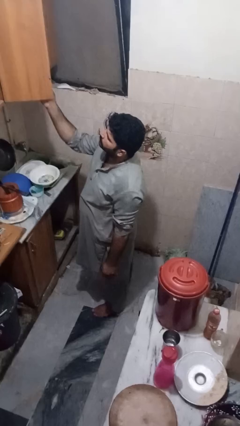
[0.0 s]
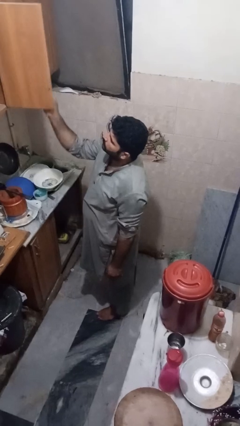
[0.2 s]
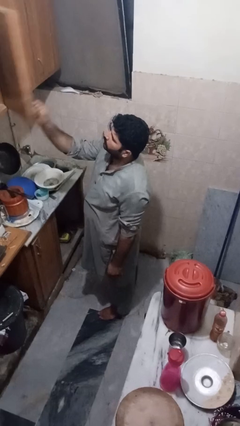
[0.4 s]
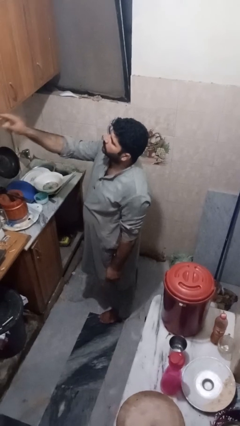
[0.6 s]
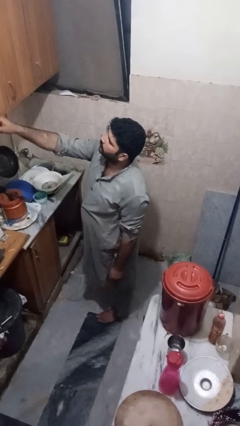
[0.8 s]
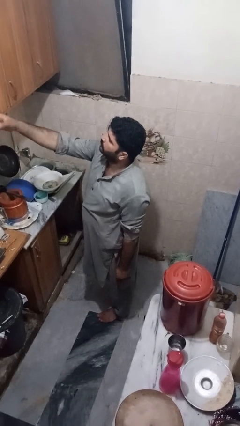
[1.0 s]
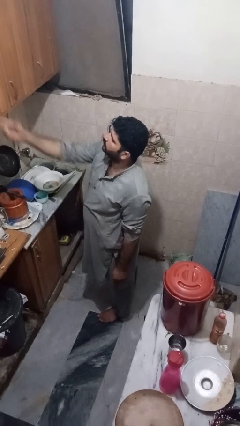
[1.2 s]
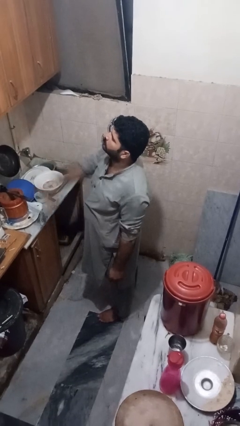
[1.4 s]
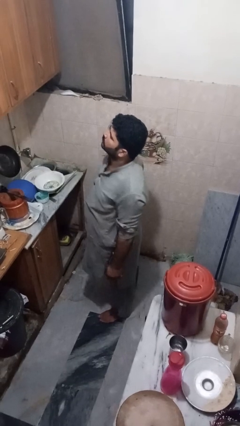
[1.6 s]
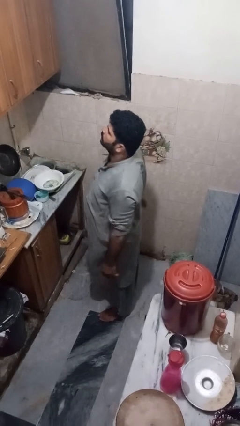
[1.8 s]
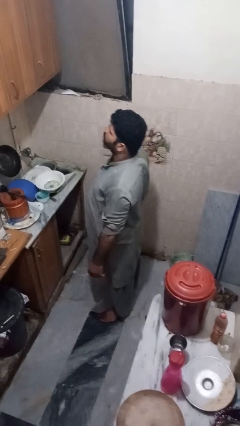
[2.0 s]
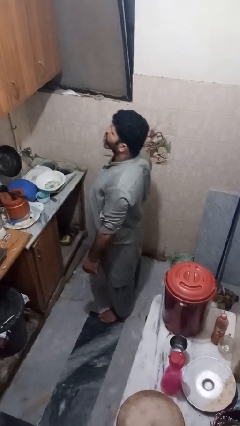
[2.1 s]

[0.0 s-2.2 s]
person closes cabinet

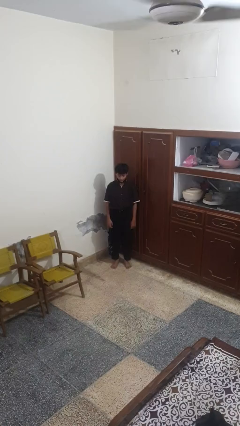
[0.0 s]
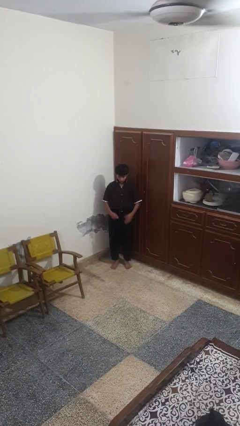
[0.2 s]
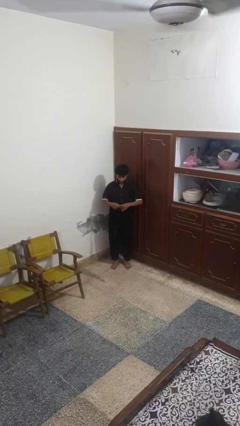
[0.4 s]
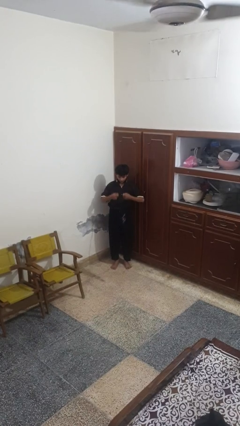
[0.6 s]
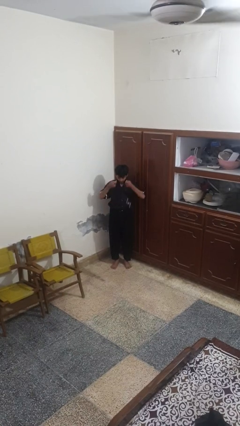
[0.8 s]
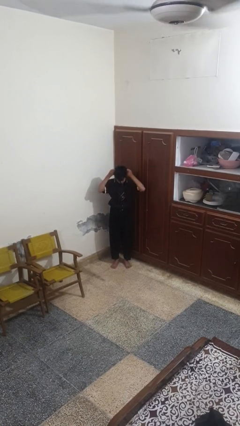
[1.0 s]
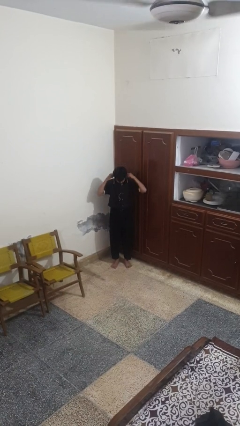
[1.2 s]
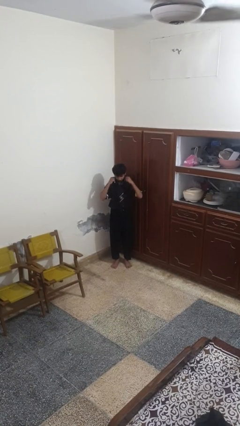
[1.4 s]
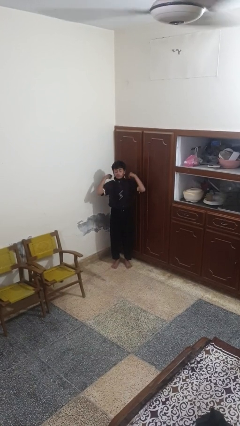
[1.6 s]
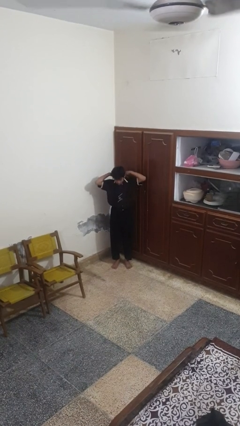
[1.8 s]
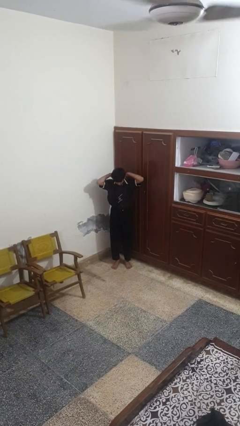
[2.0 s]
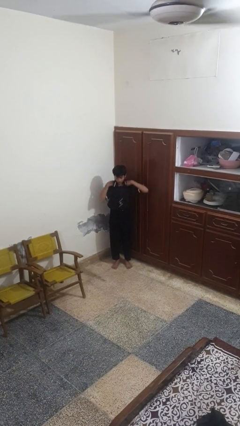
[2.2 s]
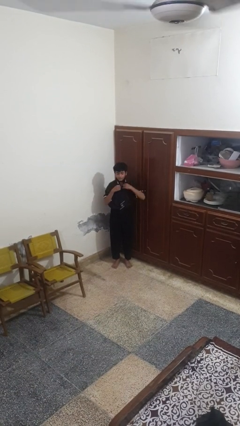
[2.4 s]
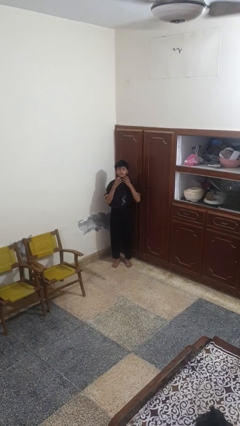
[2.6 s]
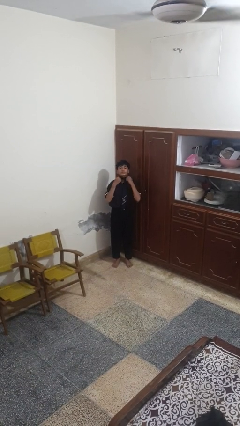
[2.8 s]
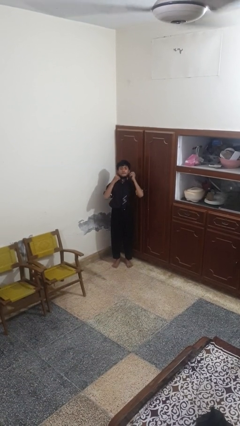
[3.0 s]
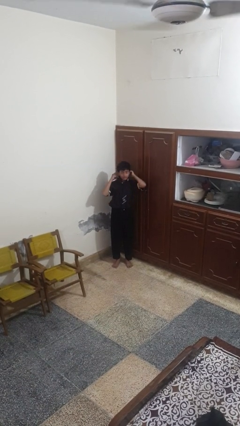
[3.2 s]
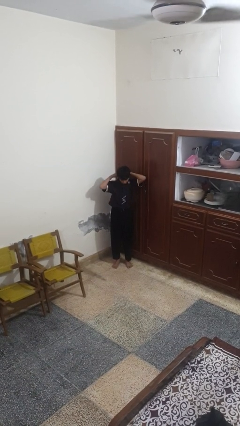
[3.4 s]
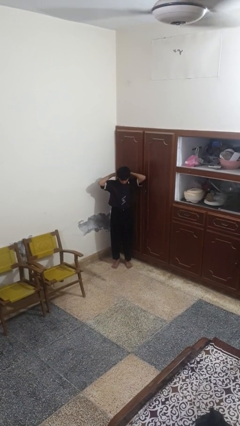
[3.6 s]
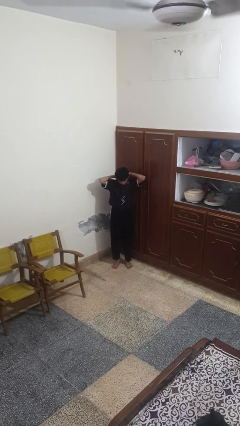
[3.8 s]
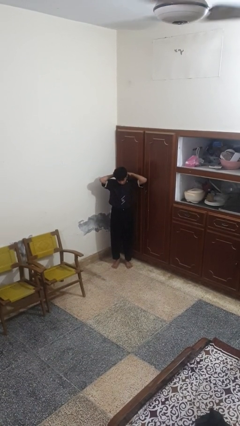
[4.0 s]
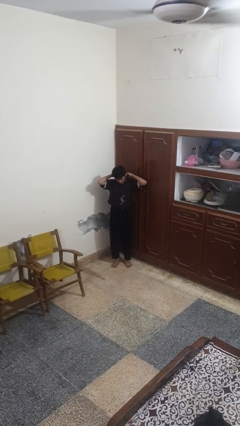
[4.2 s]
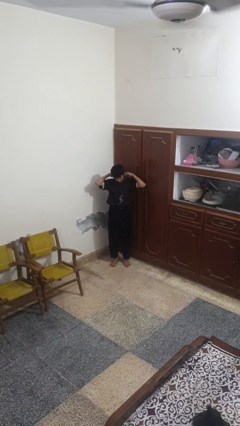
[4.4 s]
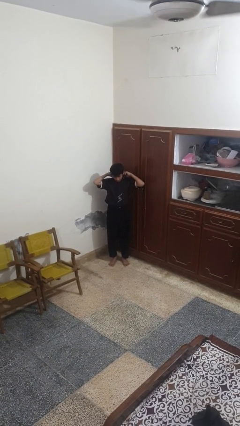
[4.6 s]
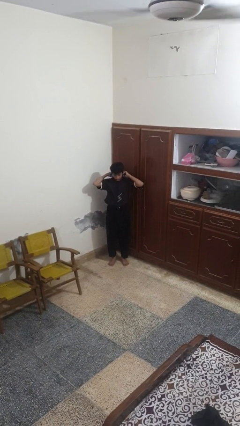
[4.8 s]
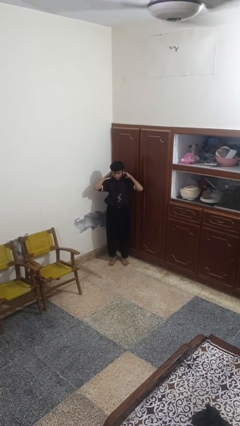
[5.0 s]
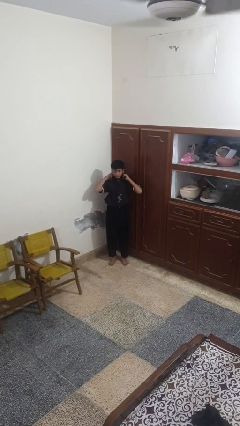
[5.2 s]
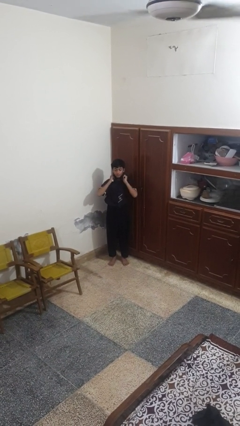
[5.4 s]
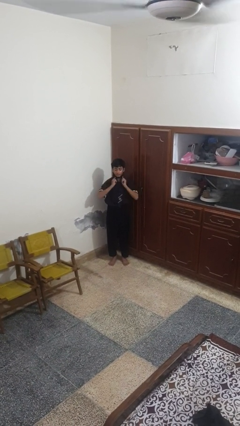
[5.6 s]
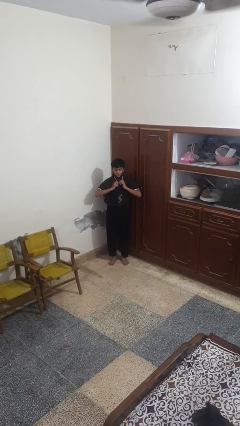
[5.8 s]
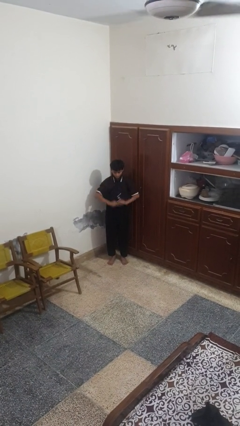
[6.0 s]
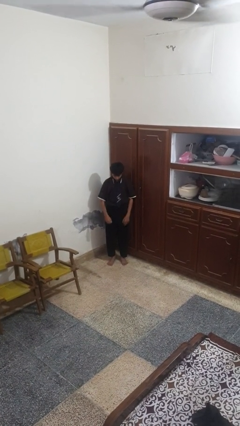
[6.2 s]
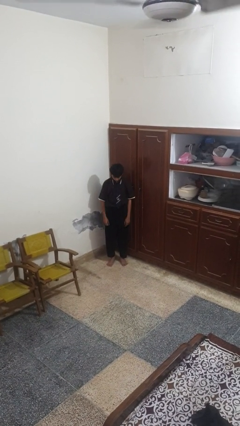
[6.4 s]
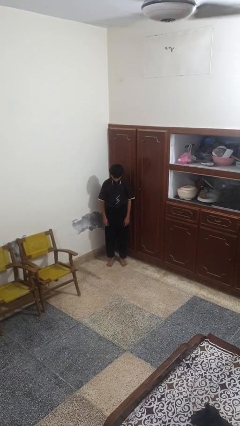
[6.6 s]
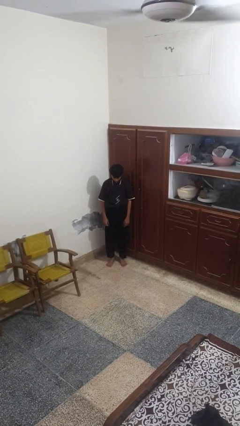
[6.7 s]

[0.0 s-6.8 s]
person puts on necktie

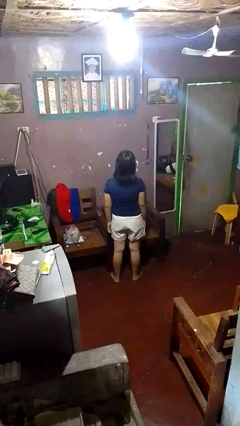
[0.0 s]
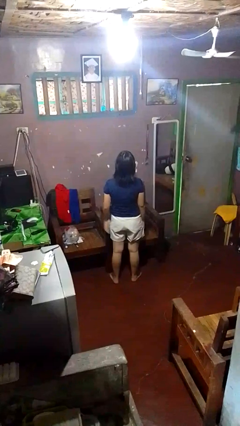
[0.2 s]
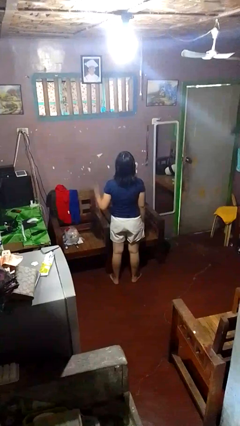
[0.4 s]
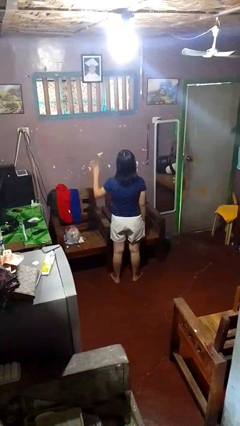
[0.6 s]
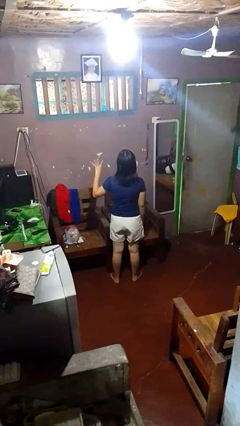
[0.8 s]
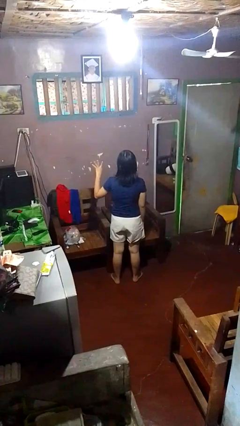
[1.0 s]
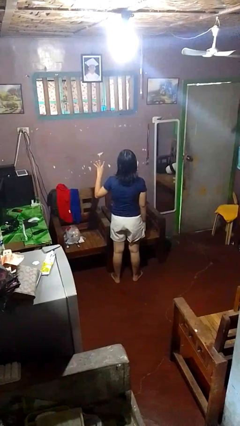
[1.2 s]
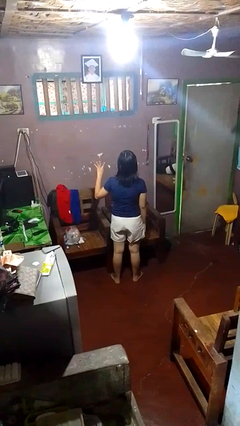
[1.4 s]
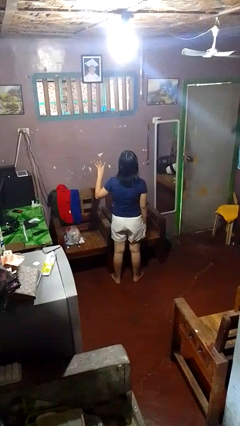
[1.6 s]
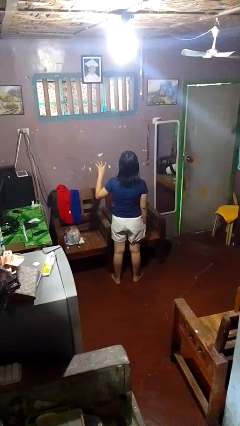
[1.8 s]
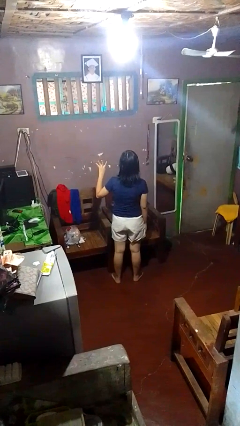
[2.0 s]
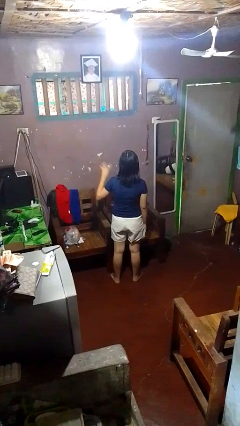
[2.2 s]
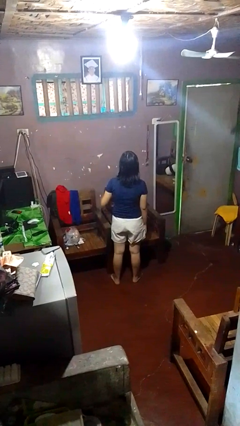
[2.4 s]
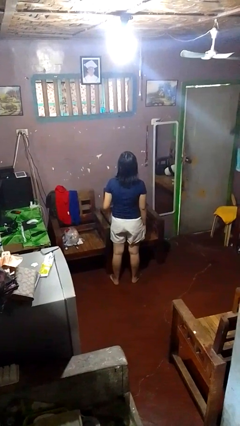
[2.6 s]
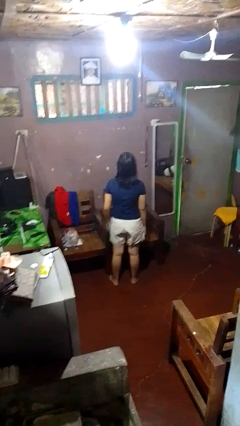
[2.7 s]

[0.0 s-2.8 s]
person gestures number four

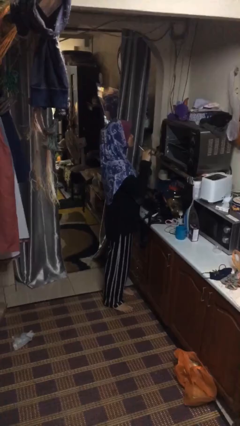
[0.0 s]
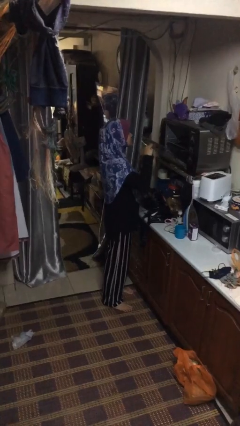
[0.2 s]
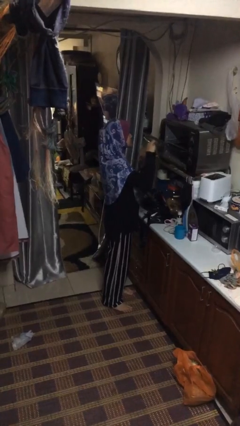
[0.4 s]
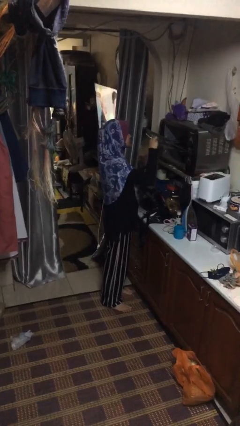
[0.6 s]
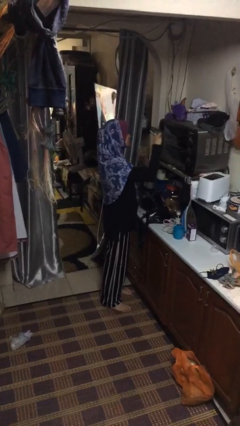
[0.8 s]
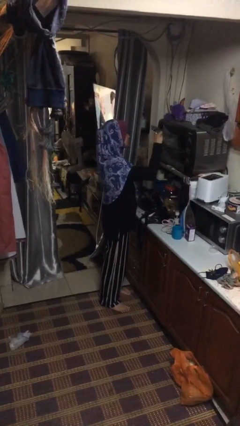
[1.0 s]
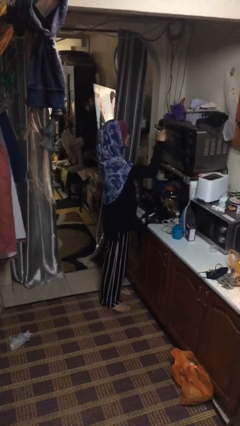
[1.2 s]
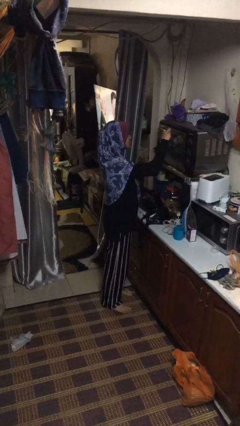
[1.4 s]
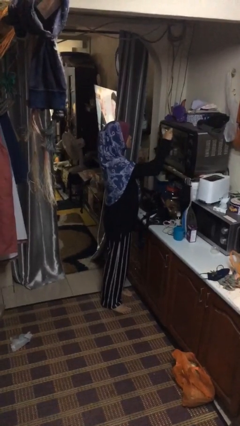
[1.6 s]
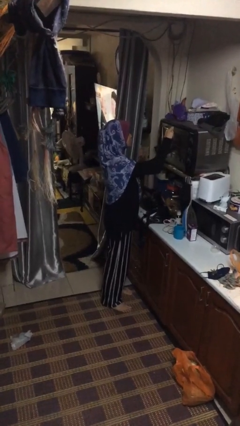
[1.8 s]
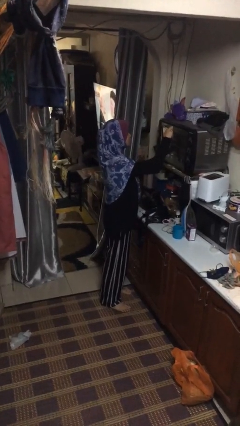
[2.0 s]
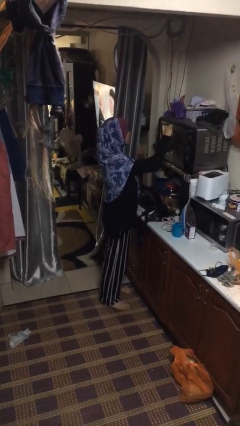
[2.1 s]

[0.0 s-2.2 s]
person closes oven door

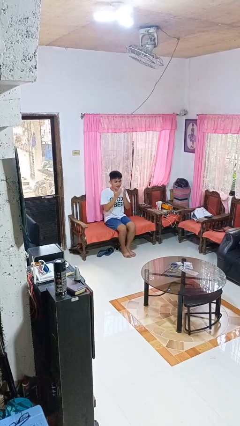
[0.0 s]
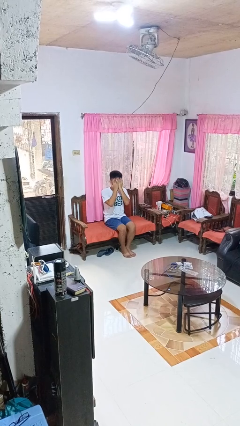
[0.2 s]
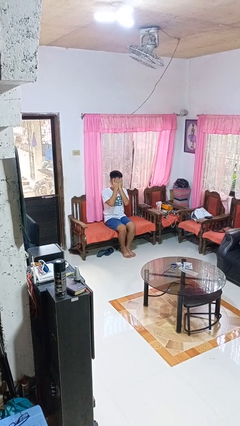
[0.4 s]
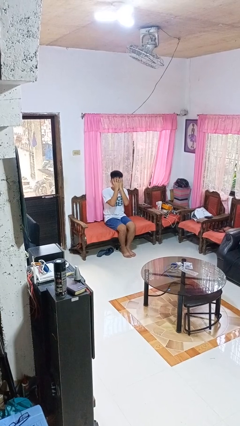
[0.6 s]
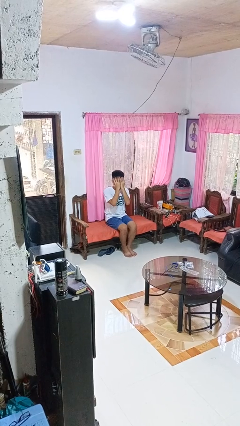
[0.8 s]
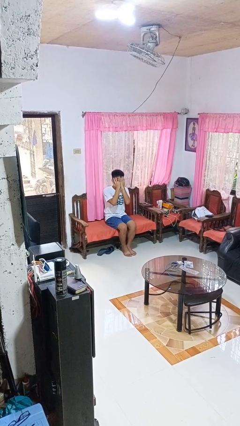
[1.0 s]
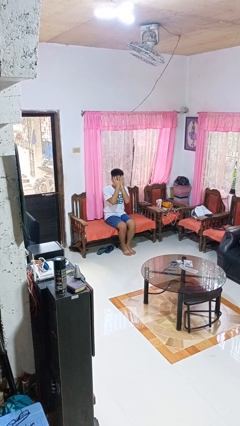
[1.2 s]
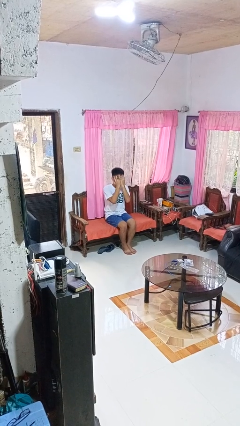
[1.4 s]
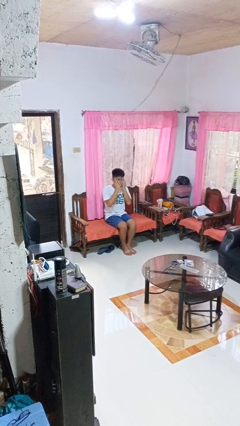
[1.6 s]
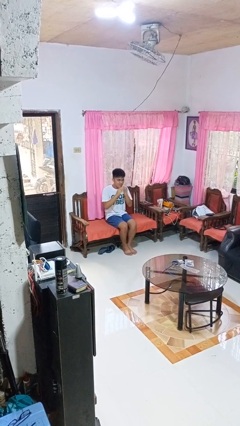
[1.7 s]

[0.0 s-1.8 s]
person covers face with hands

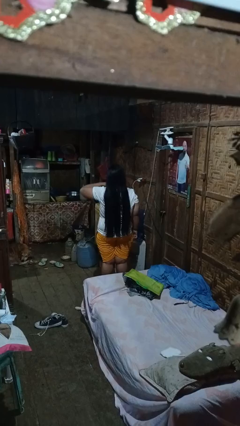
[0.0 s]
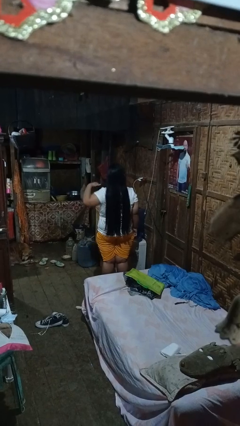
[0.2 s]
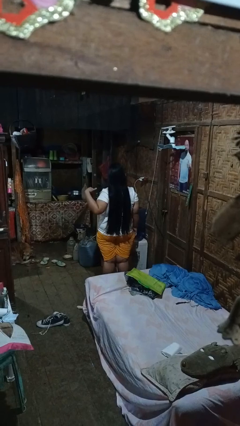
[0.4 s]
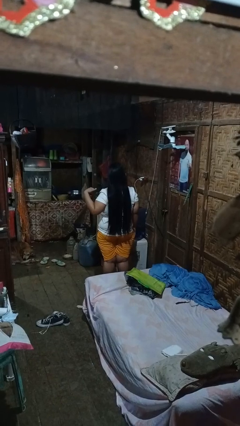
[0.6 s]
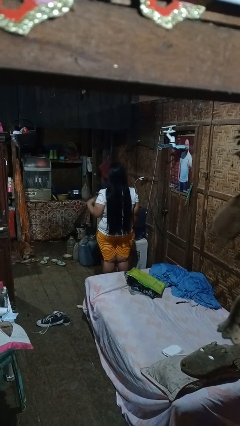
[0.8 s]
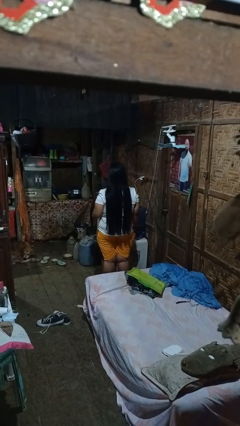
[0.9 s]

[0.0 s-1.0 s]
person gestures cut

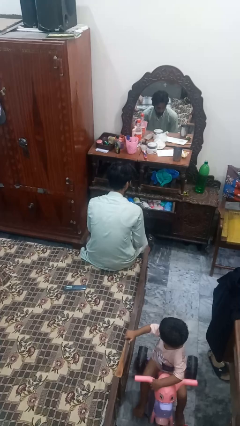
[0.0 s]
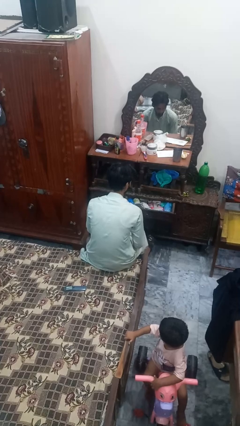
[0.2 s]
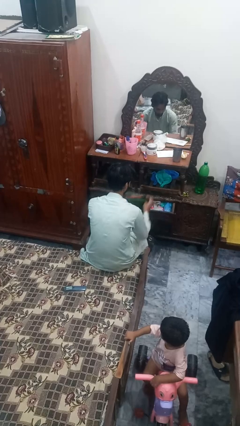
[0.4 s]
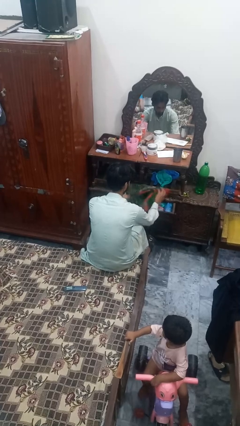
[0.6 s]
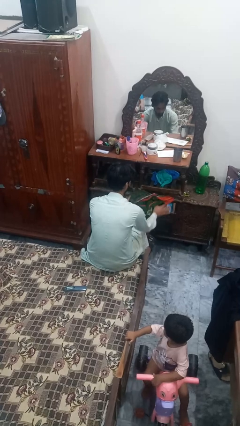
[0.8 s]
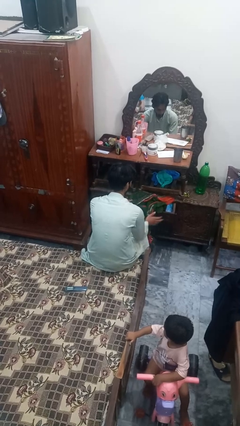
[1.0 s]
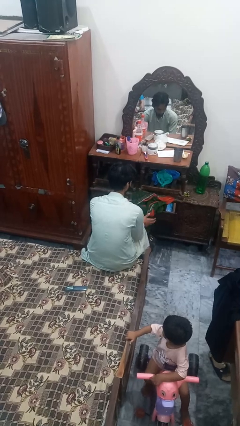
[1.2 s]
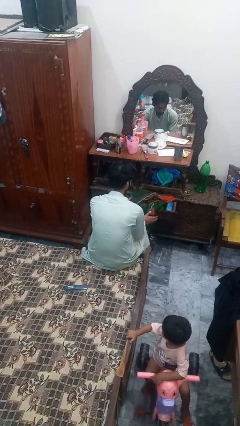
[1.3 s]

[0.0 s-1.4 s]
person puts clothes into dresser
